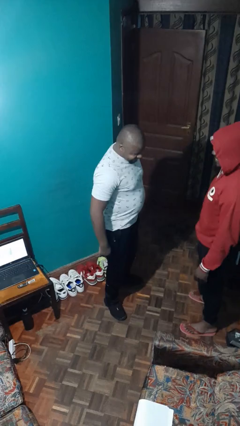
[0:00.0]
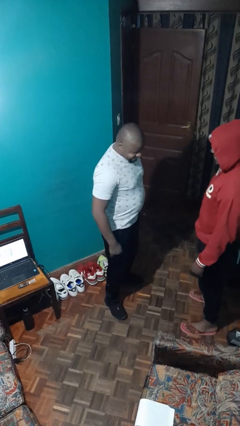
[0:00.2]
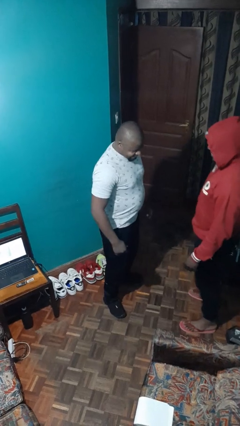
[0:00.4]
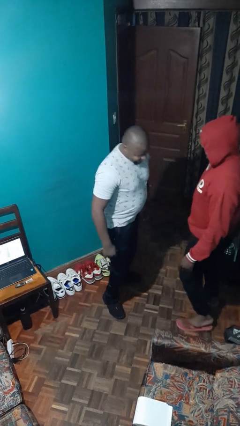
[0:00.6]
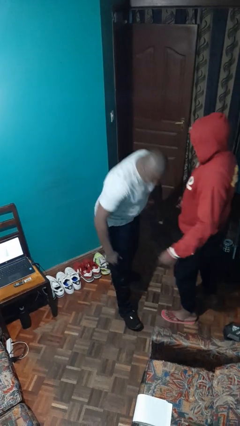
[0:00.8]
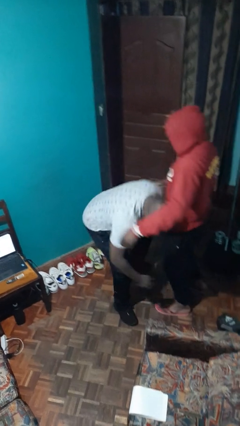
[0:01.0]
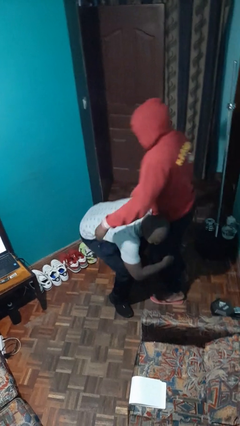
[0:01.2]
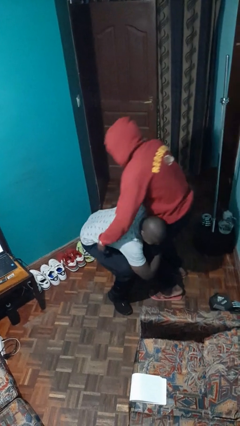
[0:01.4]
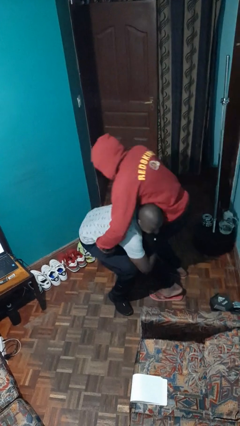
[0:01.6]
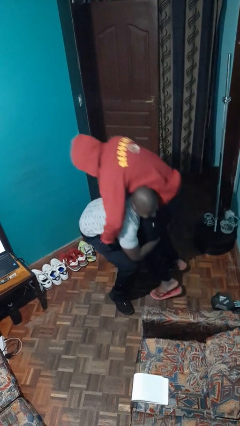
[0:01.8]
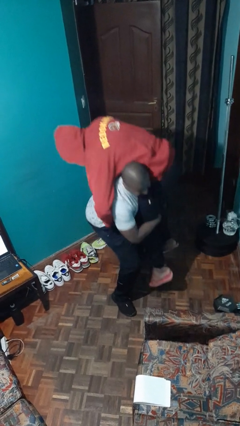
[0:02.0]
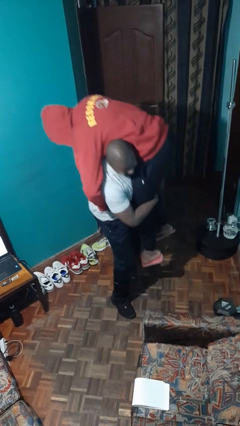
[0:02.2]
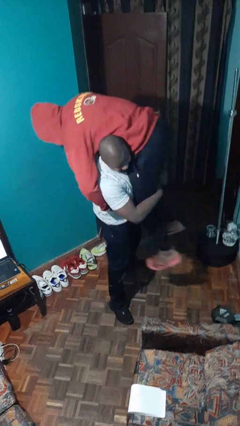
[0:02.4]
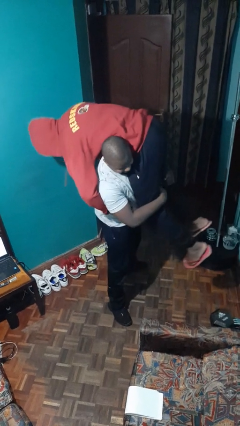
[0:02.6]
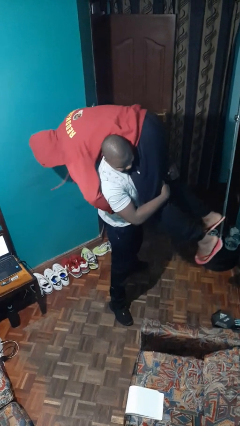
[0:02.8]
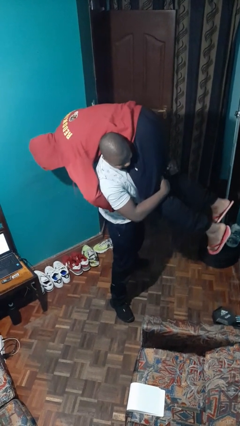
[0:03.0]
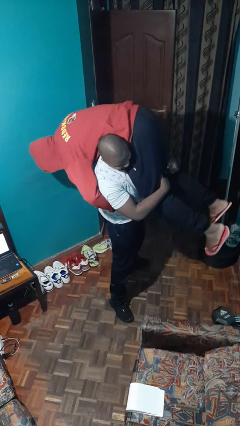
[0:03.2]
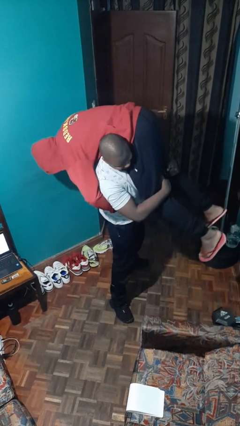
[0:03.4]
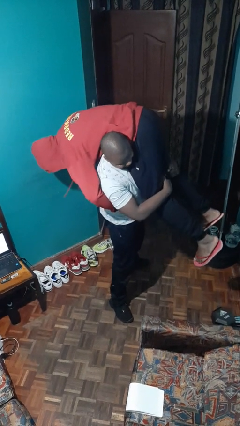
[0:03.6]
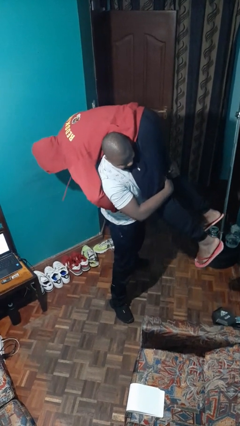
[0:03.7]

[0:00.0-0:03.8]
person carries person over shoulder

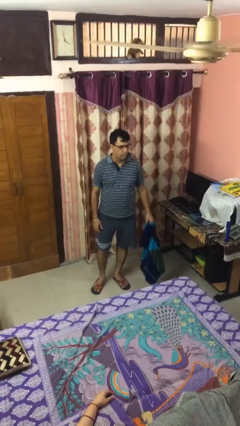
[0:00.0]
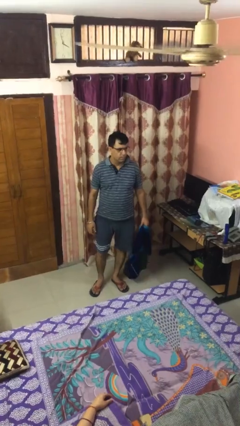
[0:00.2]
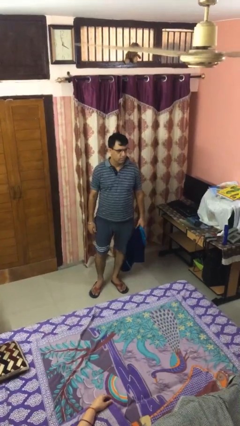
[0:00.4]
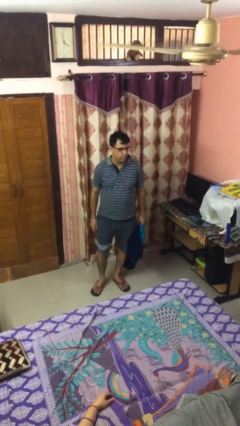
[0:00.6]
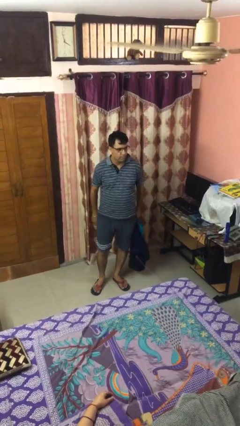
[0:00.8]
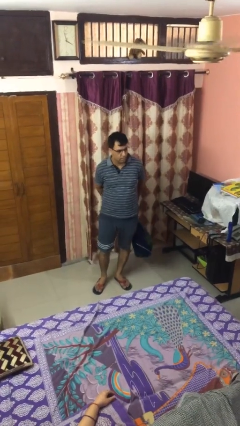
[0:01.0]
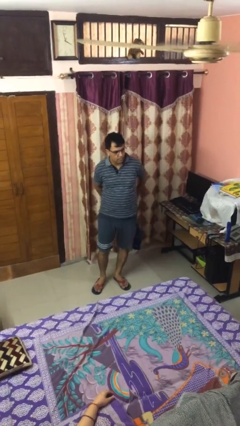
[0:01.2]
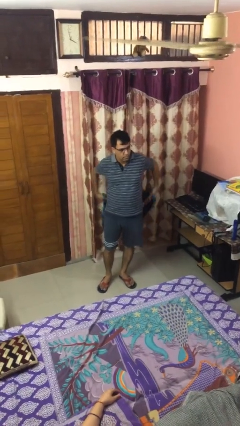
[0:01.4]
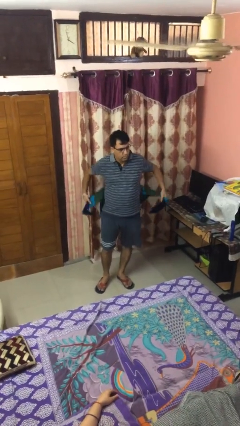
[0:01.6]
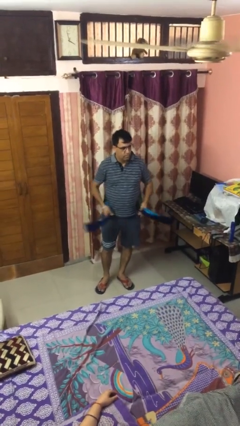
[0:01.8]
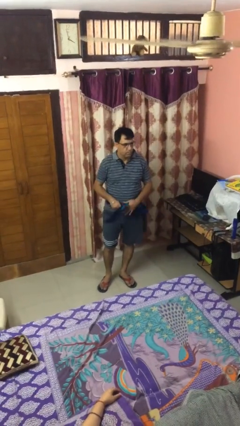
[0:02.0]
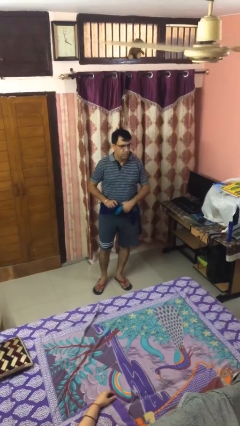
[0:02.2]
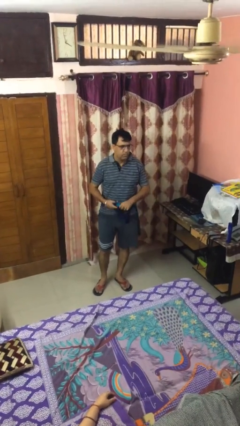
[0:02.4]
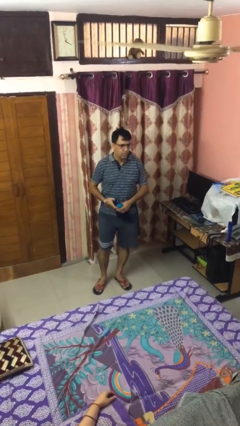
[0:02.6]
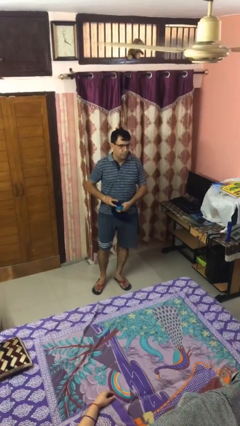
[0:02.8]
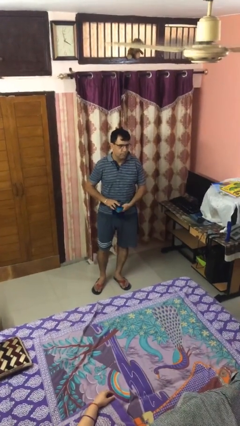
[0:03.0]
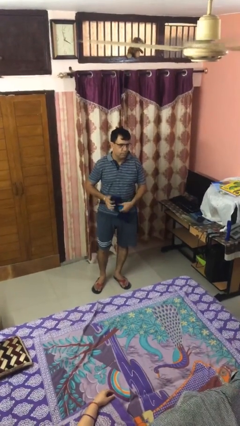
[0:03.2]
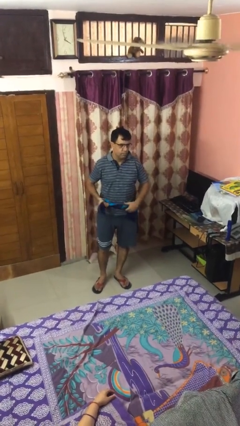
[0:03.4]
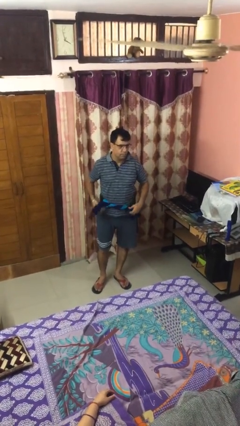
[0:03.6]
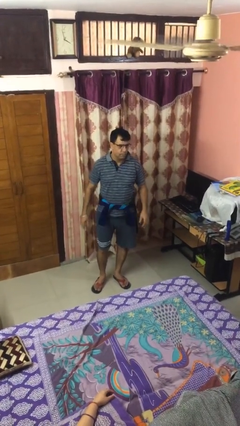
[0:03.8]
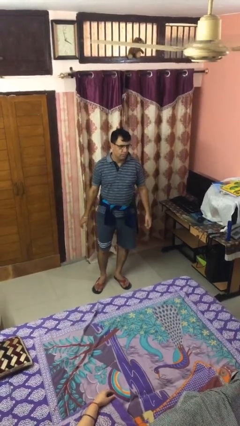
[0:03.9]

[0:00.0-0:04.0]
person ties jacket around waist

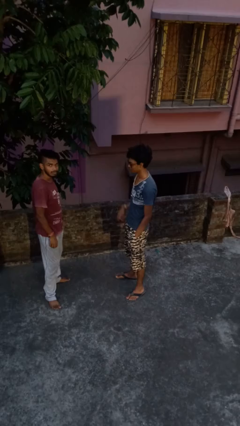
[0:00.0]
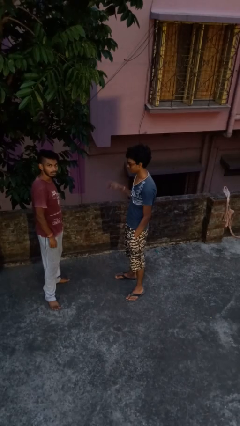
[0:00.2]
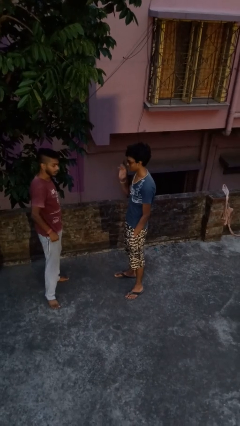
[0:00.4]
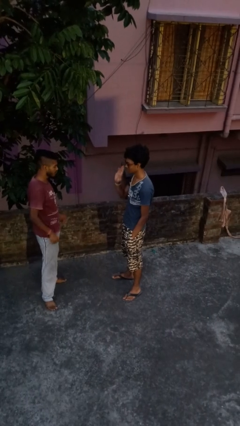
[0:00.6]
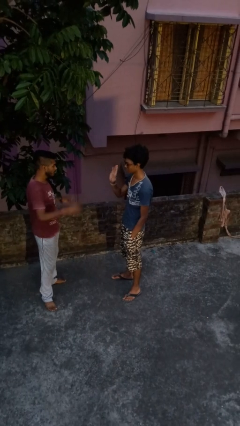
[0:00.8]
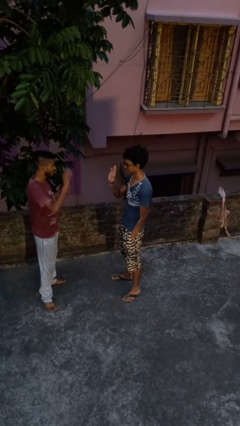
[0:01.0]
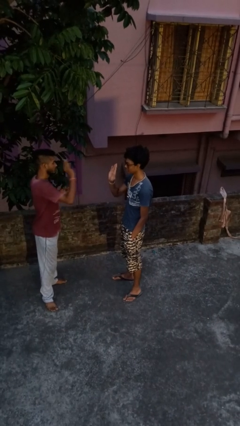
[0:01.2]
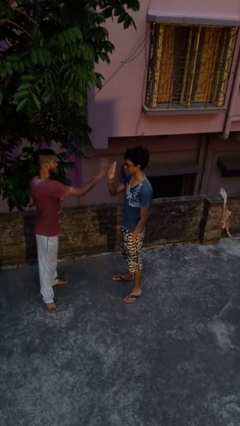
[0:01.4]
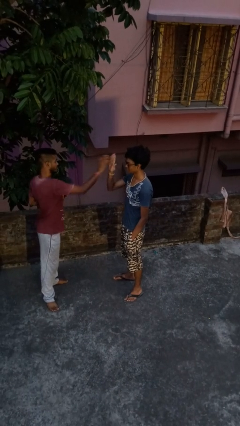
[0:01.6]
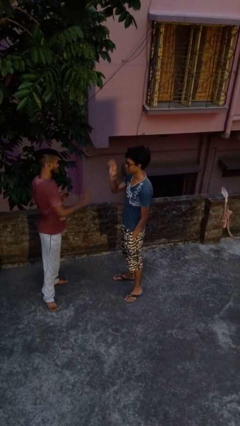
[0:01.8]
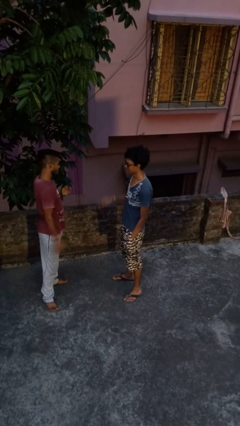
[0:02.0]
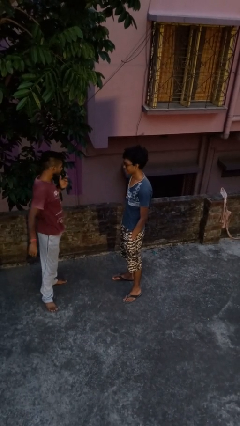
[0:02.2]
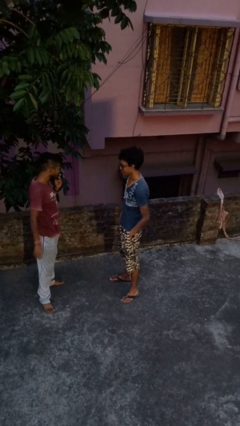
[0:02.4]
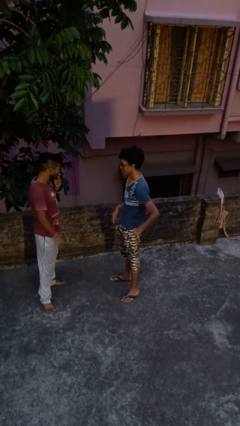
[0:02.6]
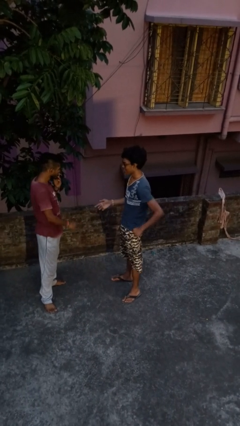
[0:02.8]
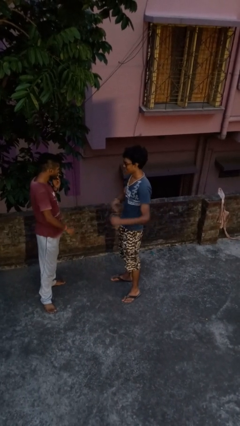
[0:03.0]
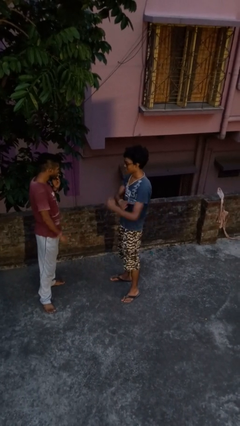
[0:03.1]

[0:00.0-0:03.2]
person highfives hand

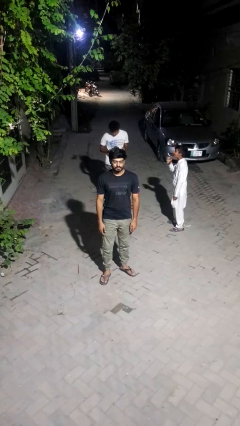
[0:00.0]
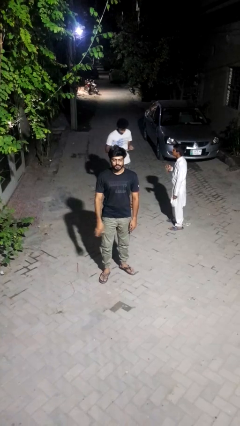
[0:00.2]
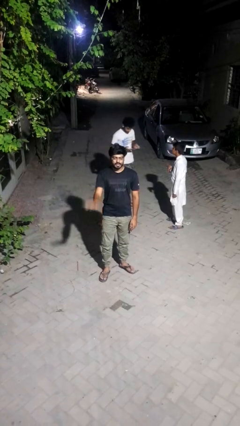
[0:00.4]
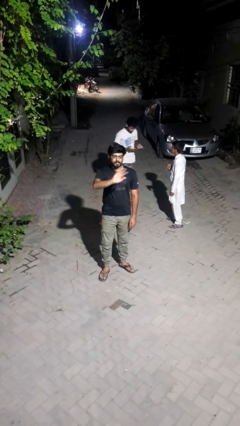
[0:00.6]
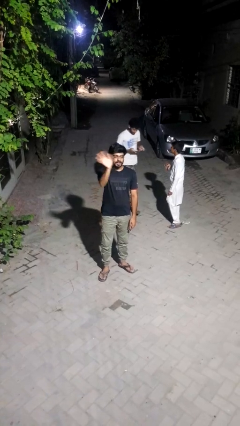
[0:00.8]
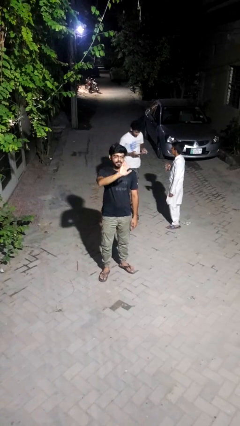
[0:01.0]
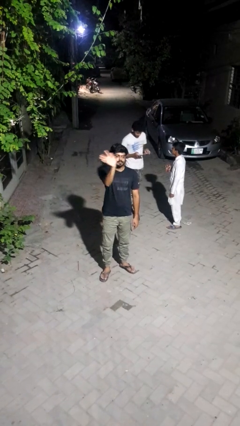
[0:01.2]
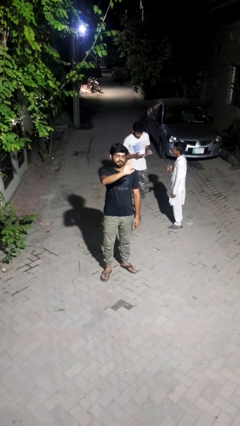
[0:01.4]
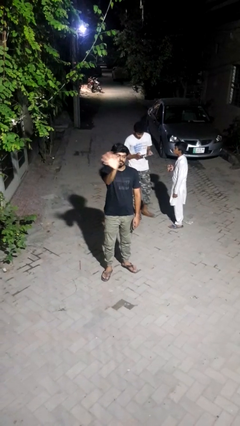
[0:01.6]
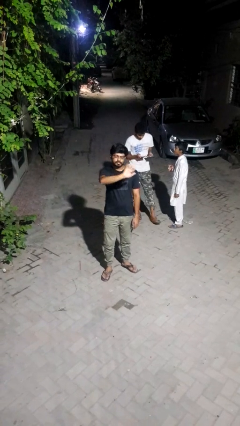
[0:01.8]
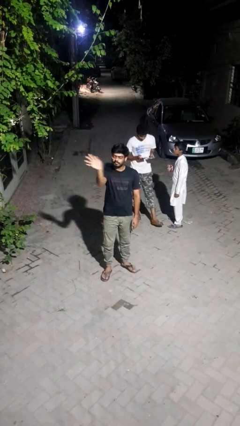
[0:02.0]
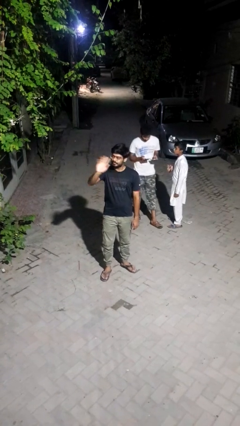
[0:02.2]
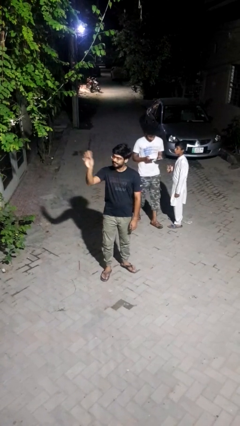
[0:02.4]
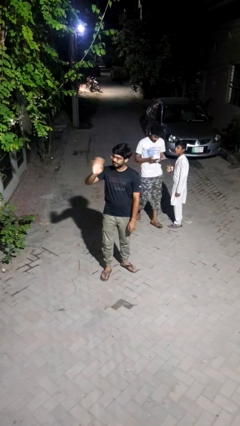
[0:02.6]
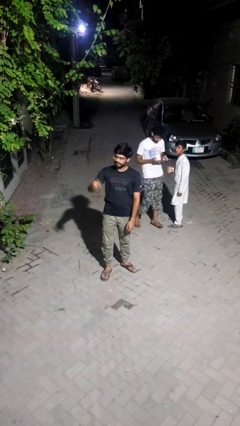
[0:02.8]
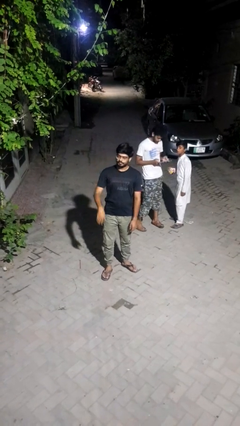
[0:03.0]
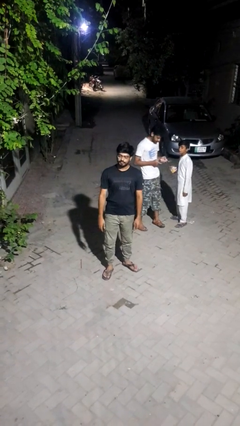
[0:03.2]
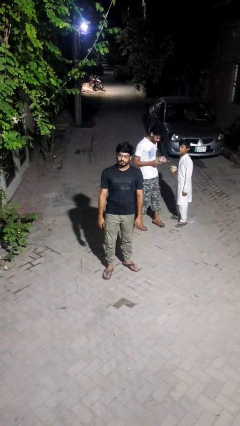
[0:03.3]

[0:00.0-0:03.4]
person waves at person

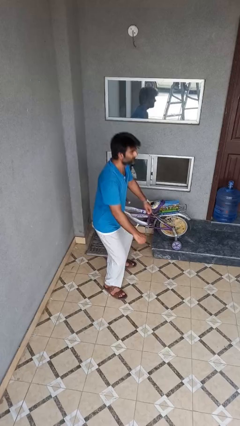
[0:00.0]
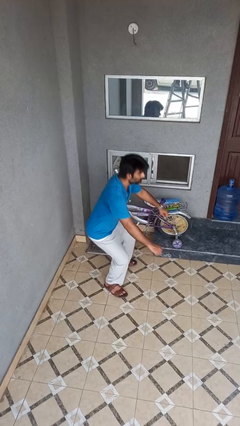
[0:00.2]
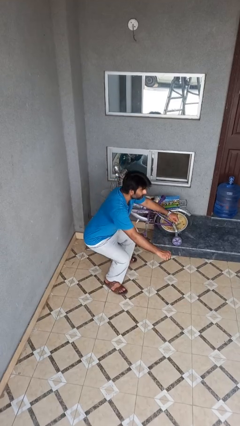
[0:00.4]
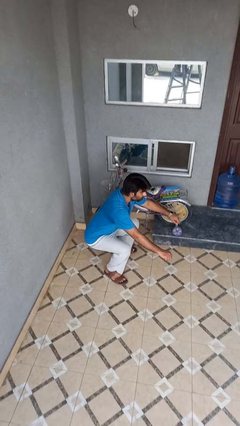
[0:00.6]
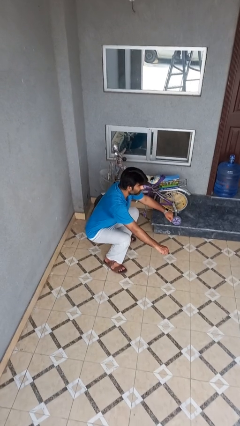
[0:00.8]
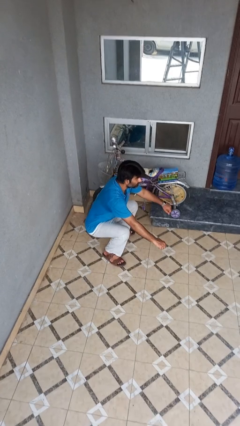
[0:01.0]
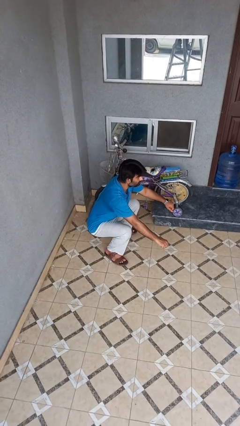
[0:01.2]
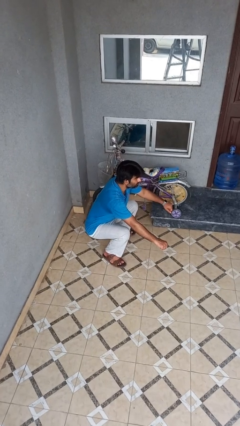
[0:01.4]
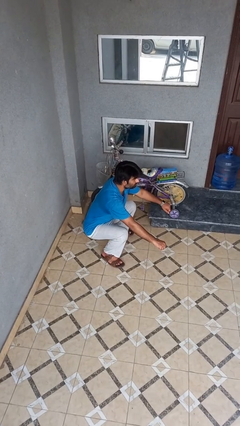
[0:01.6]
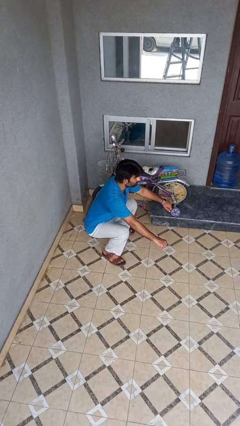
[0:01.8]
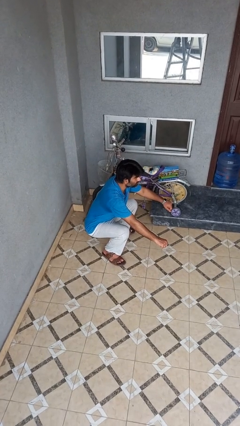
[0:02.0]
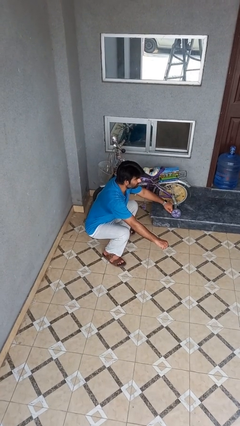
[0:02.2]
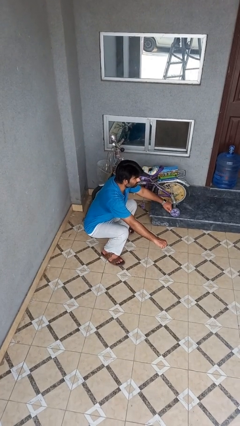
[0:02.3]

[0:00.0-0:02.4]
person squats

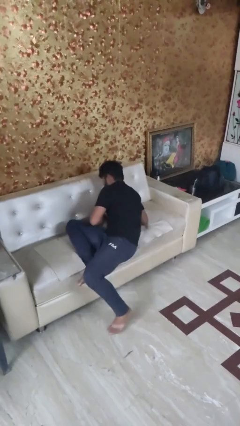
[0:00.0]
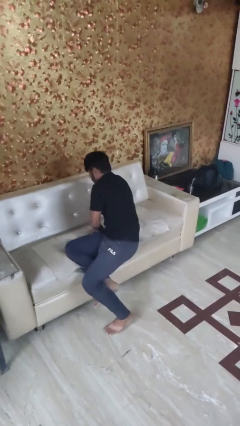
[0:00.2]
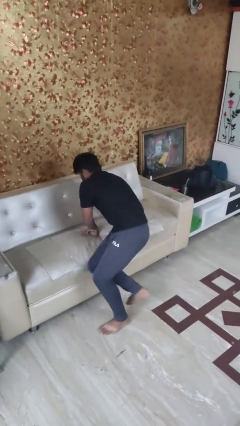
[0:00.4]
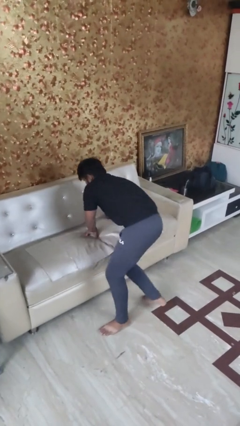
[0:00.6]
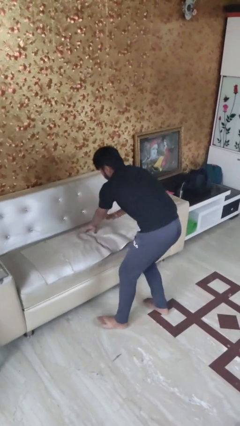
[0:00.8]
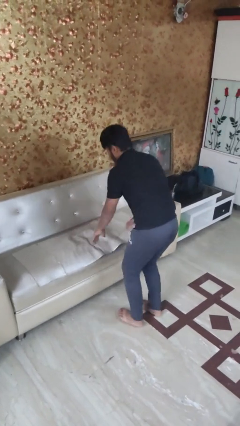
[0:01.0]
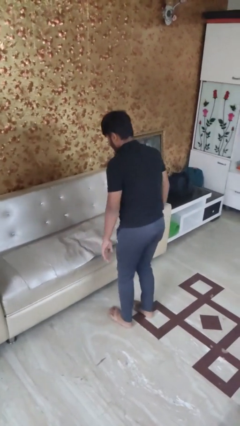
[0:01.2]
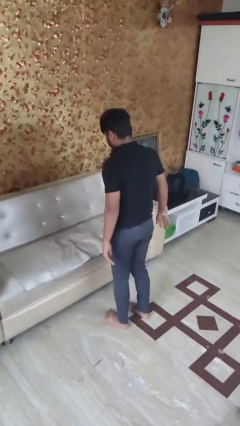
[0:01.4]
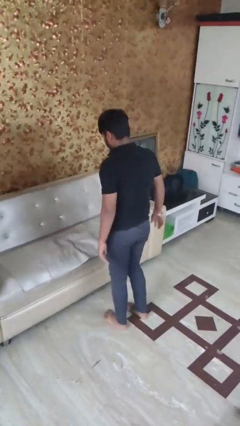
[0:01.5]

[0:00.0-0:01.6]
person stands up
